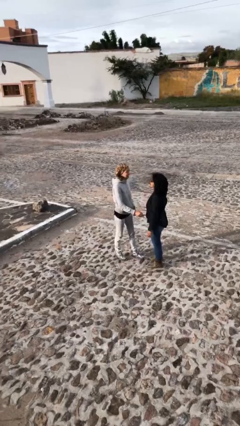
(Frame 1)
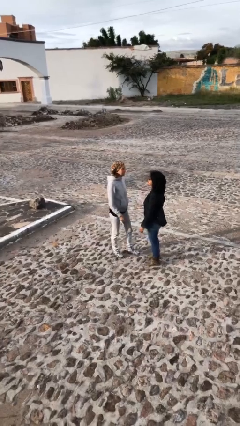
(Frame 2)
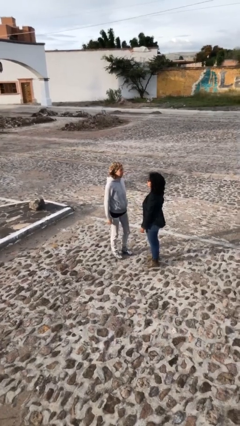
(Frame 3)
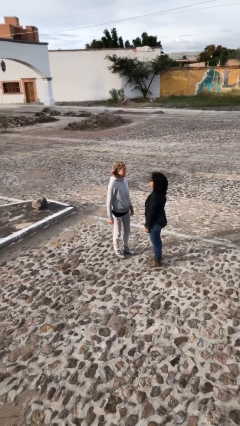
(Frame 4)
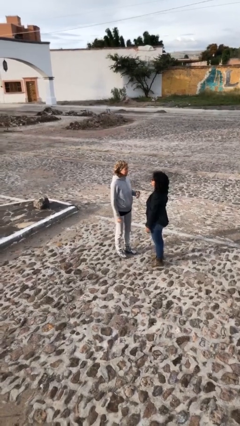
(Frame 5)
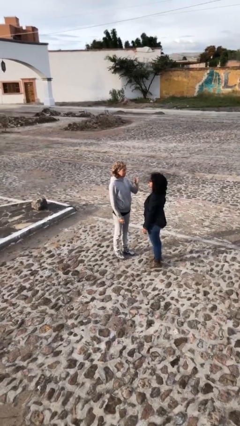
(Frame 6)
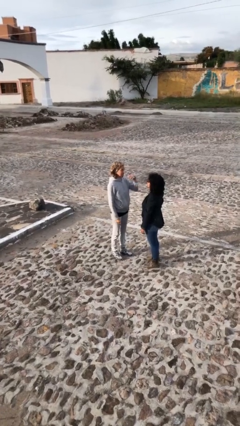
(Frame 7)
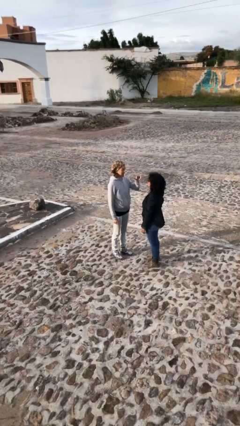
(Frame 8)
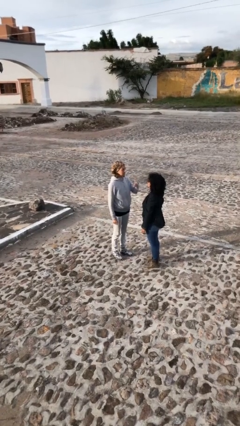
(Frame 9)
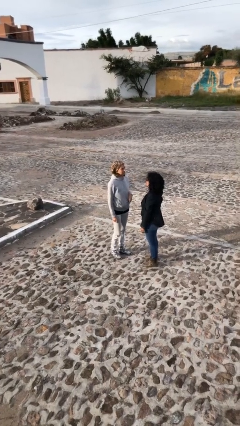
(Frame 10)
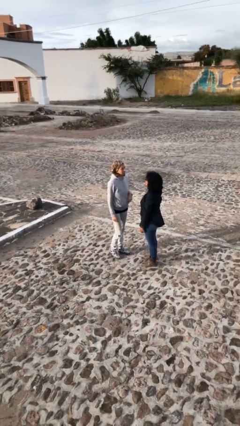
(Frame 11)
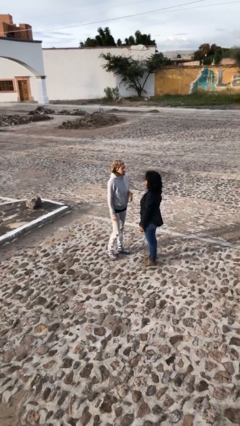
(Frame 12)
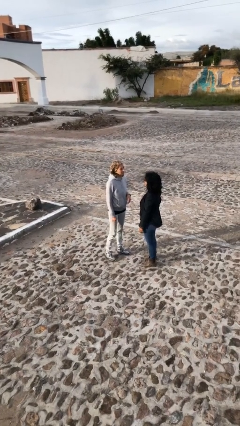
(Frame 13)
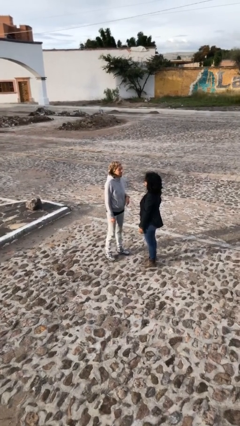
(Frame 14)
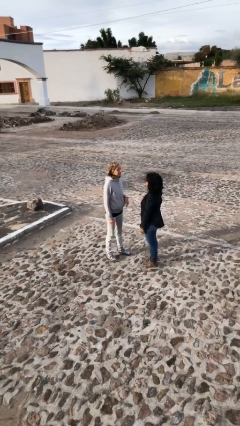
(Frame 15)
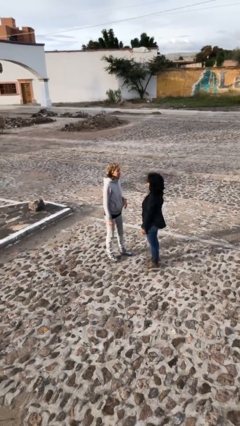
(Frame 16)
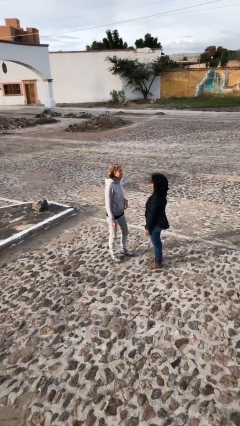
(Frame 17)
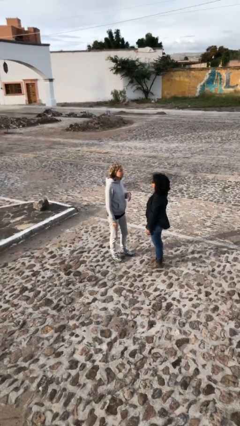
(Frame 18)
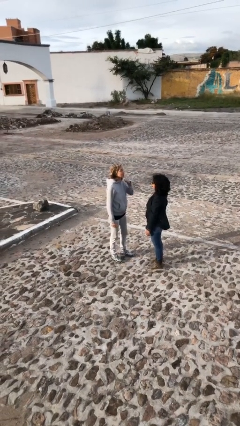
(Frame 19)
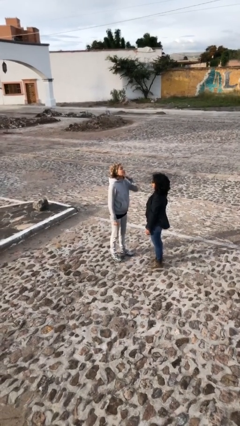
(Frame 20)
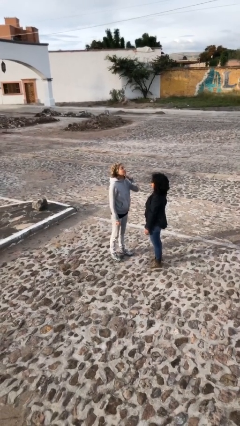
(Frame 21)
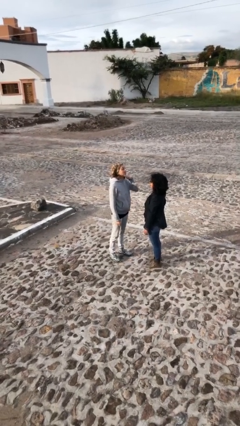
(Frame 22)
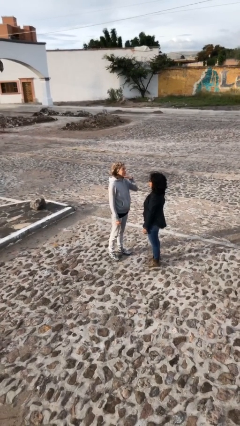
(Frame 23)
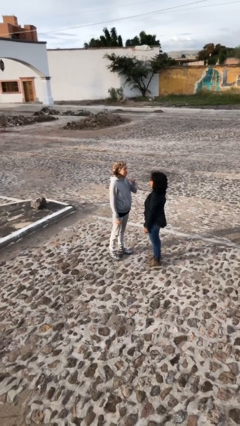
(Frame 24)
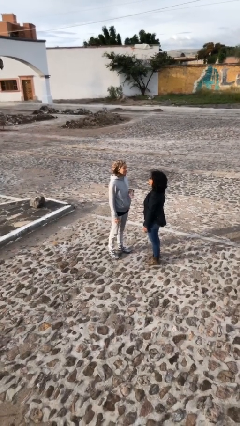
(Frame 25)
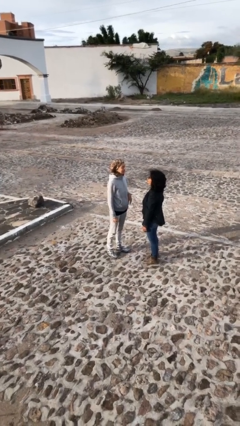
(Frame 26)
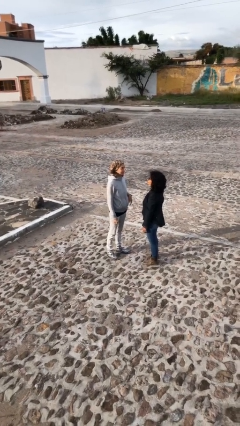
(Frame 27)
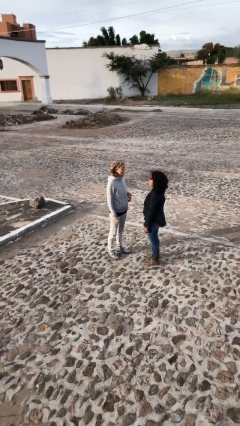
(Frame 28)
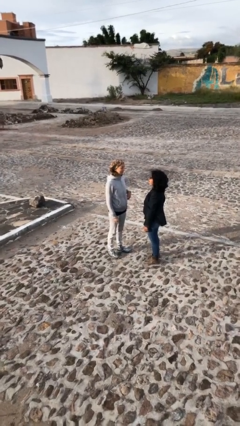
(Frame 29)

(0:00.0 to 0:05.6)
person talks to person

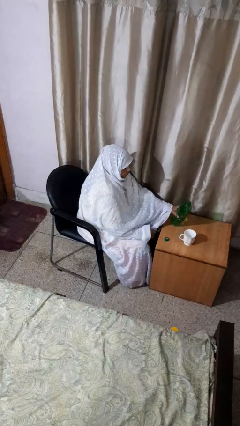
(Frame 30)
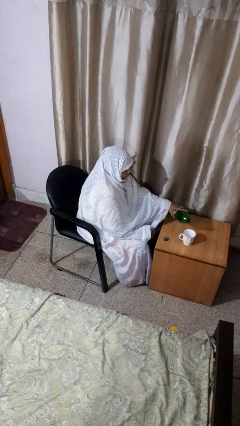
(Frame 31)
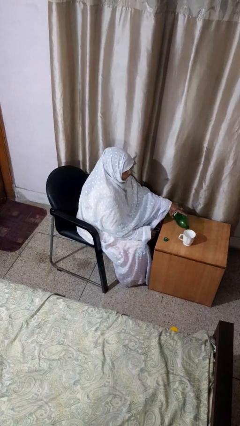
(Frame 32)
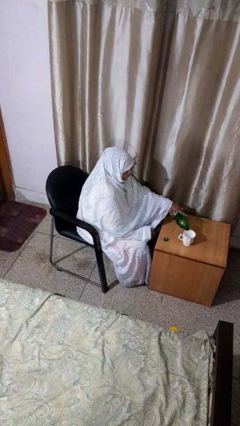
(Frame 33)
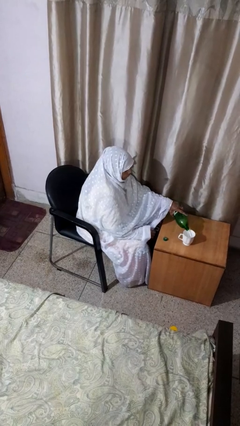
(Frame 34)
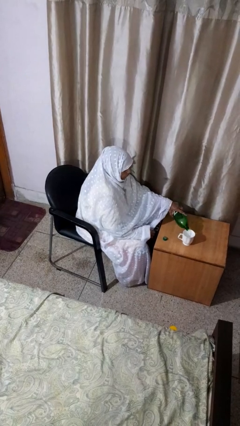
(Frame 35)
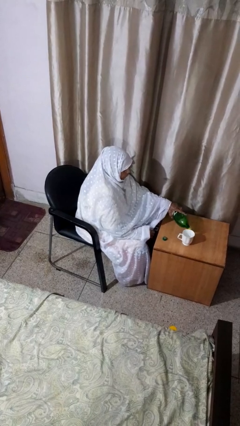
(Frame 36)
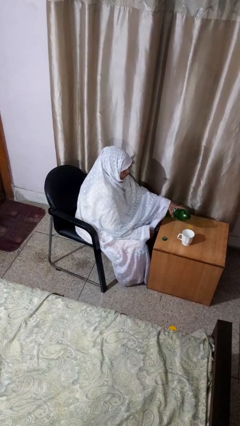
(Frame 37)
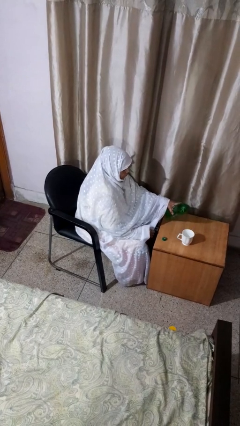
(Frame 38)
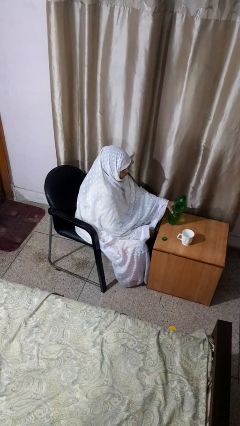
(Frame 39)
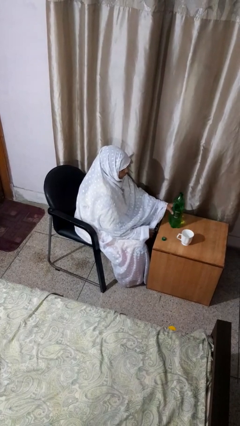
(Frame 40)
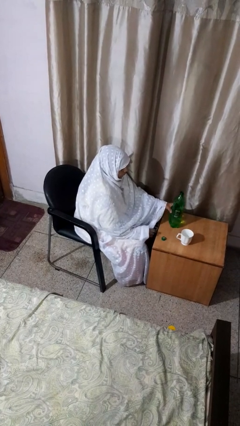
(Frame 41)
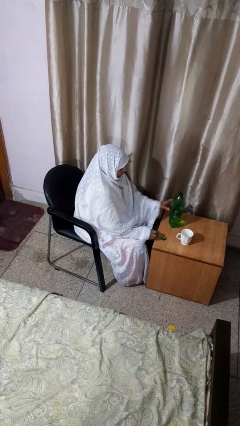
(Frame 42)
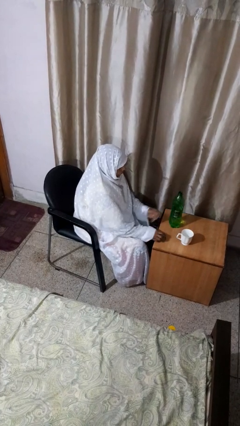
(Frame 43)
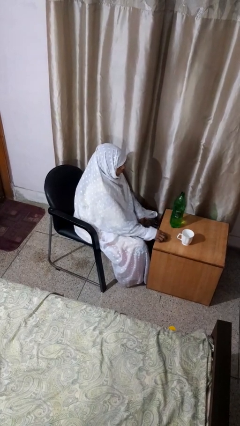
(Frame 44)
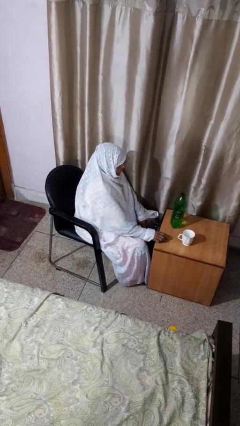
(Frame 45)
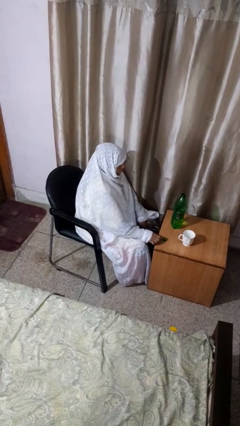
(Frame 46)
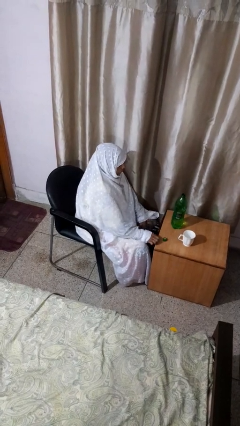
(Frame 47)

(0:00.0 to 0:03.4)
person pours liquid into cup

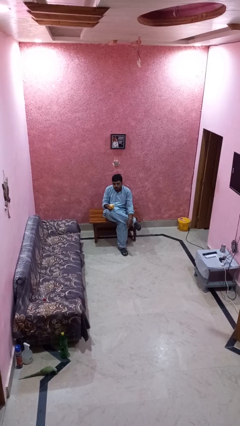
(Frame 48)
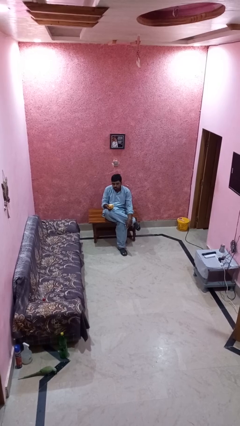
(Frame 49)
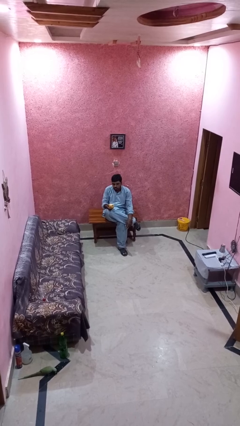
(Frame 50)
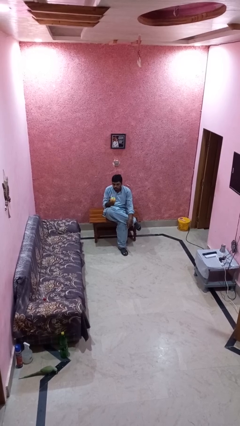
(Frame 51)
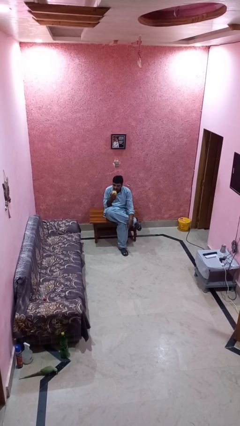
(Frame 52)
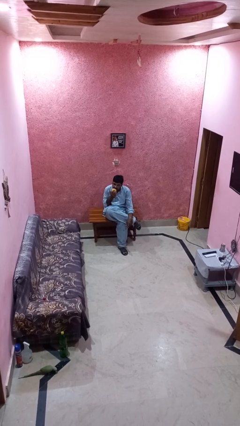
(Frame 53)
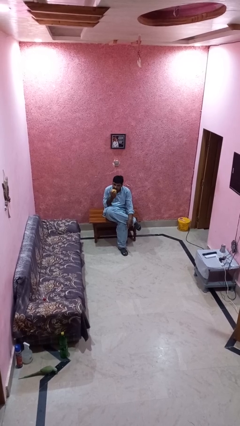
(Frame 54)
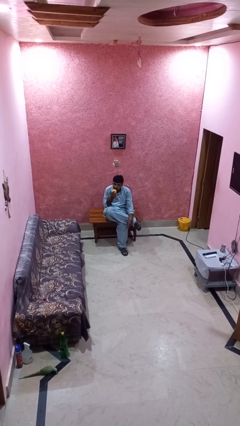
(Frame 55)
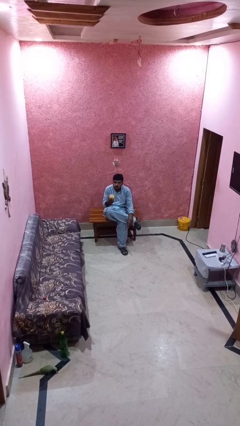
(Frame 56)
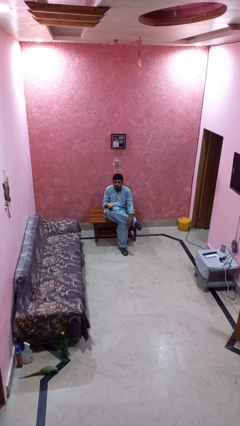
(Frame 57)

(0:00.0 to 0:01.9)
person eats apple

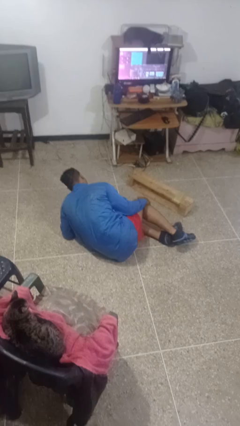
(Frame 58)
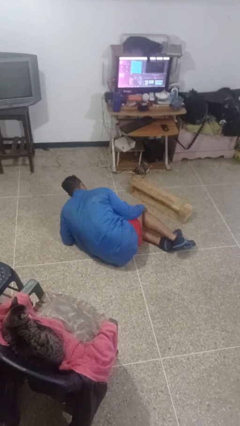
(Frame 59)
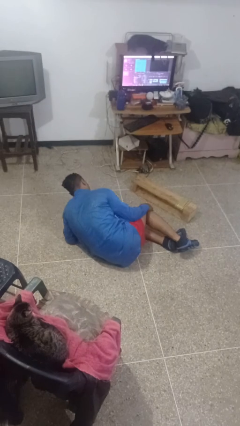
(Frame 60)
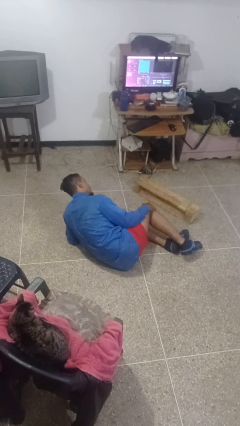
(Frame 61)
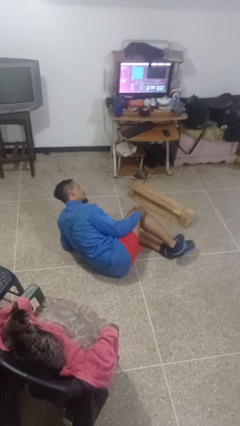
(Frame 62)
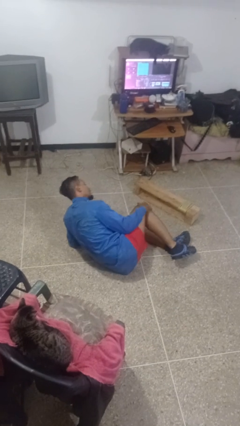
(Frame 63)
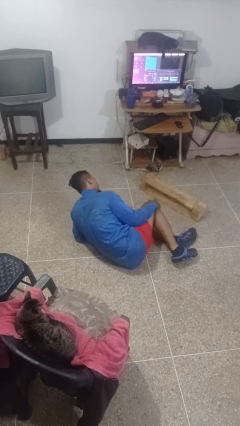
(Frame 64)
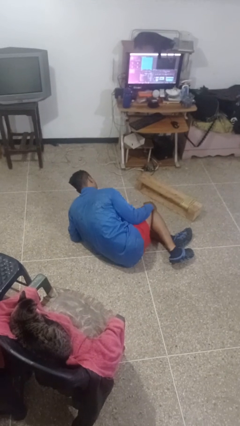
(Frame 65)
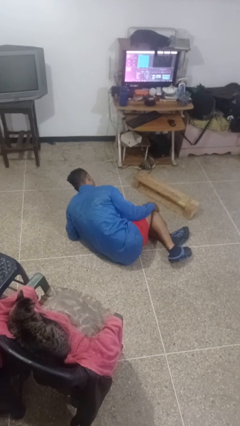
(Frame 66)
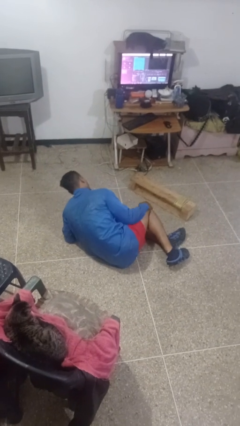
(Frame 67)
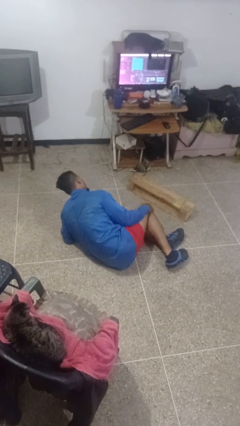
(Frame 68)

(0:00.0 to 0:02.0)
person lies down on floor

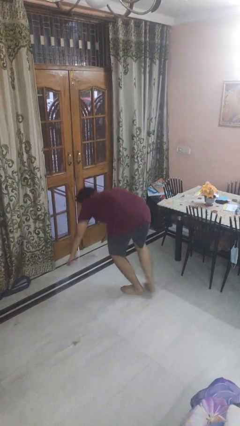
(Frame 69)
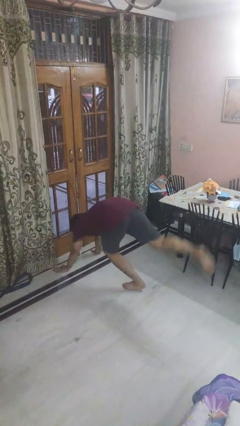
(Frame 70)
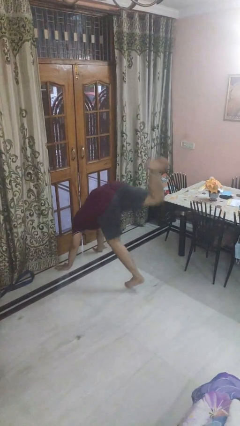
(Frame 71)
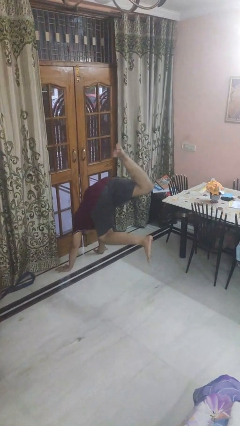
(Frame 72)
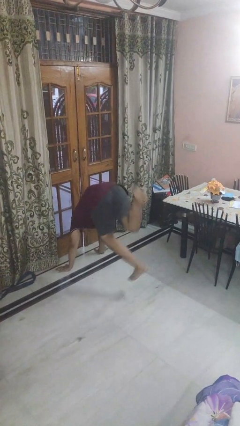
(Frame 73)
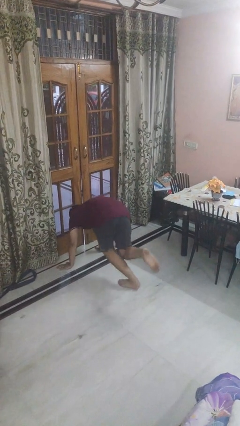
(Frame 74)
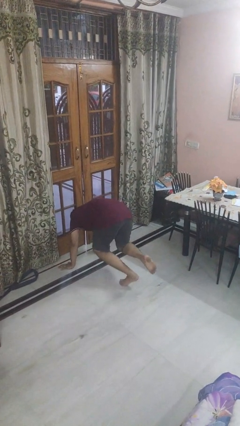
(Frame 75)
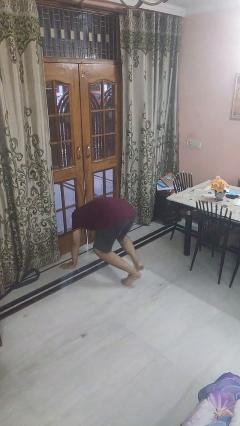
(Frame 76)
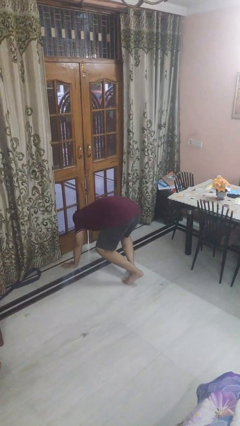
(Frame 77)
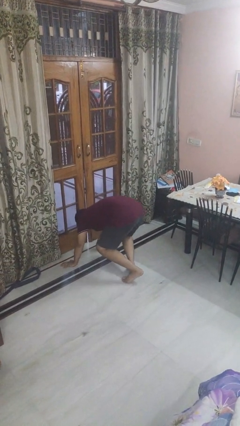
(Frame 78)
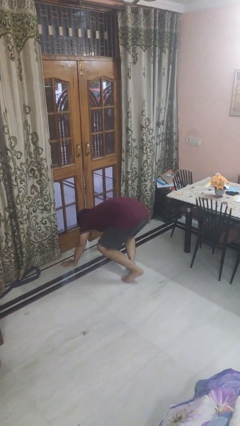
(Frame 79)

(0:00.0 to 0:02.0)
person handstand

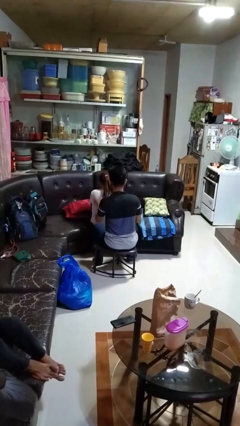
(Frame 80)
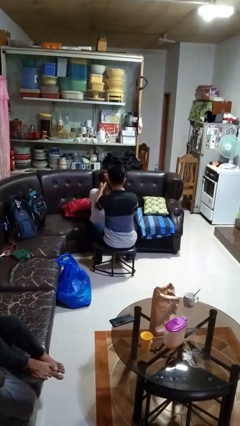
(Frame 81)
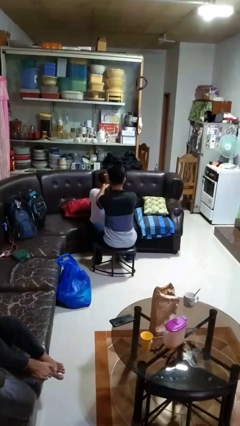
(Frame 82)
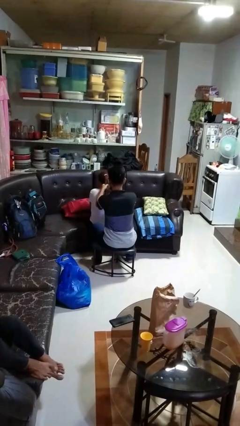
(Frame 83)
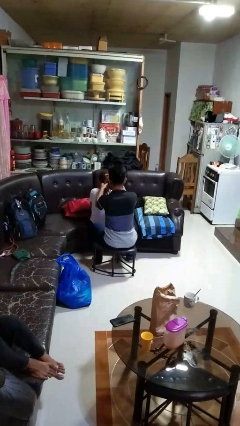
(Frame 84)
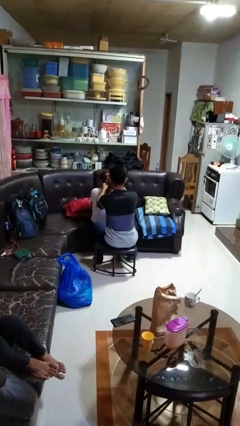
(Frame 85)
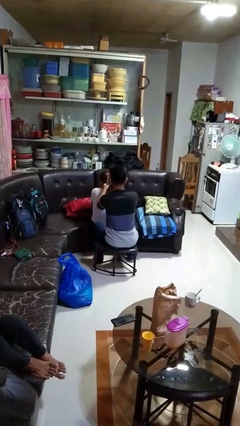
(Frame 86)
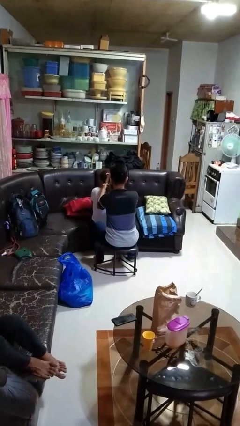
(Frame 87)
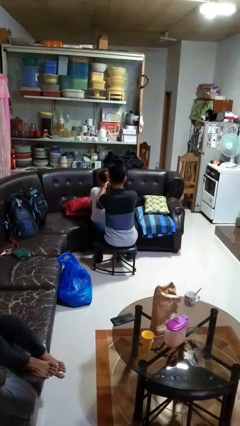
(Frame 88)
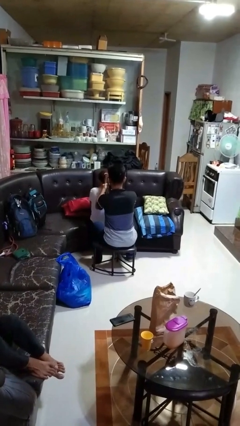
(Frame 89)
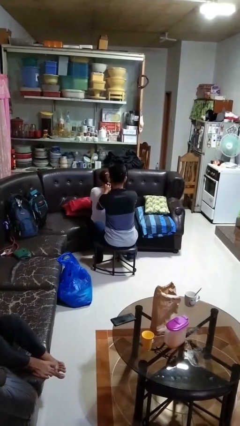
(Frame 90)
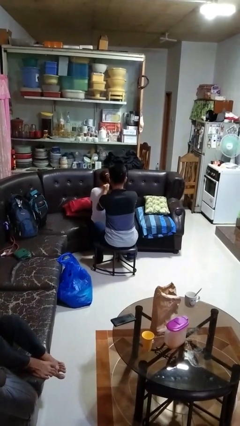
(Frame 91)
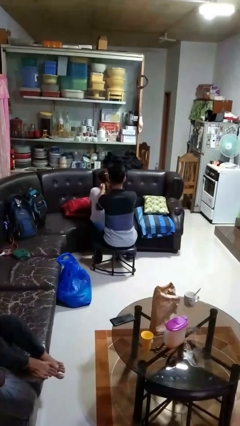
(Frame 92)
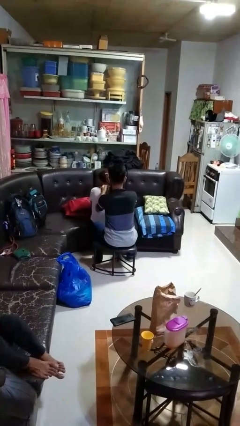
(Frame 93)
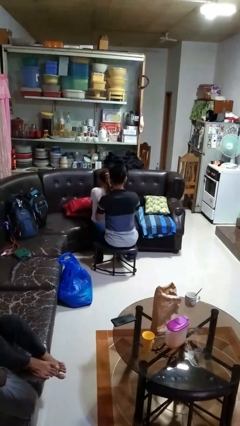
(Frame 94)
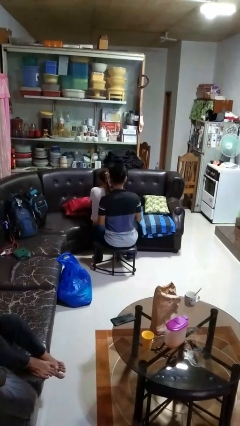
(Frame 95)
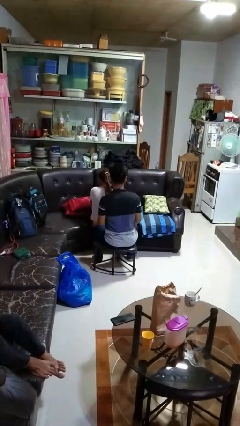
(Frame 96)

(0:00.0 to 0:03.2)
person braids hair of person
